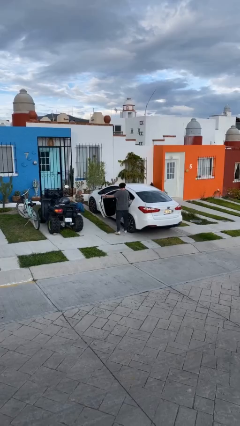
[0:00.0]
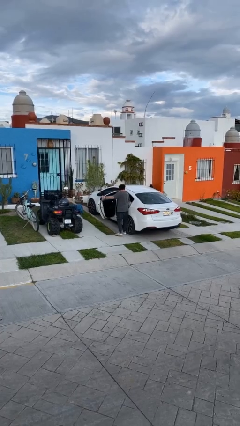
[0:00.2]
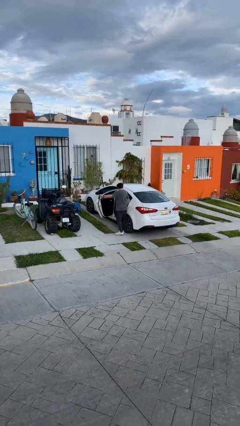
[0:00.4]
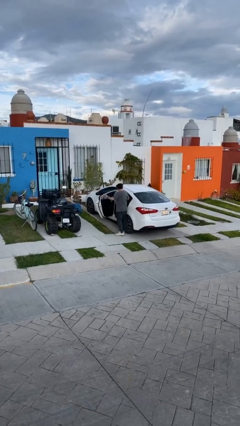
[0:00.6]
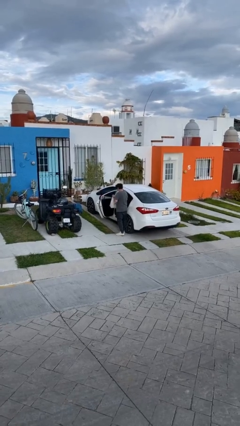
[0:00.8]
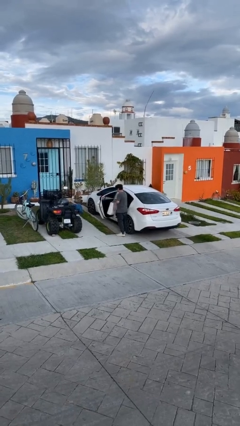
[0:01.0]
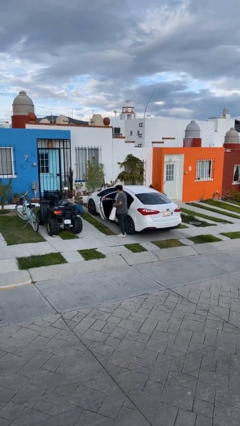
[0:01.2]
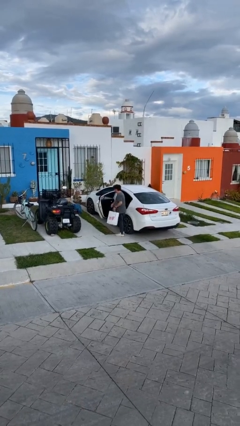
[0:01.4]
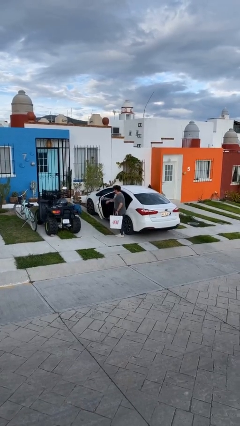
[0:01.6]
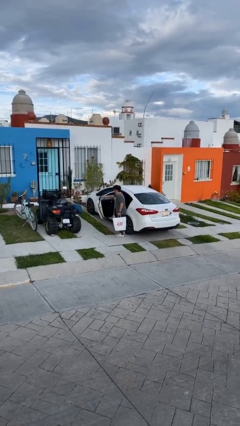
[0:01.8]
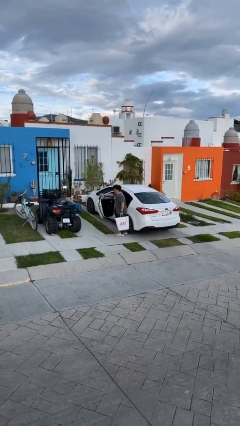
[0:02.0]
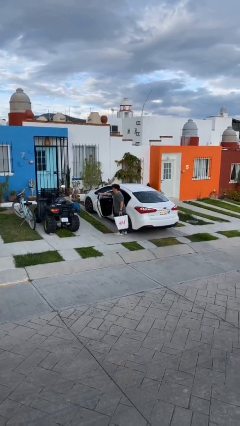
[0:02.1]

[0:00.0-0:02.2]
person unloads car

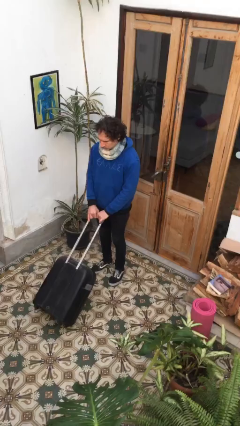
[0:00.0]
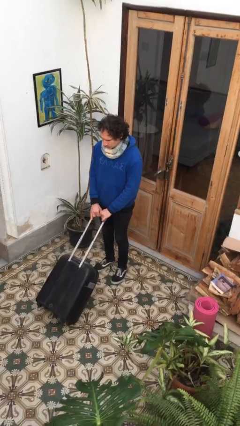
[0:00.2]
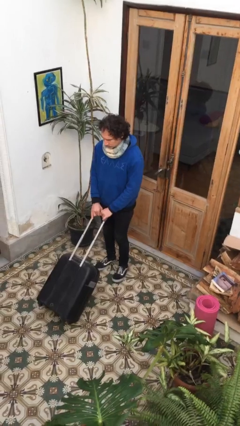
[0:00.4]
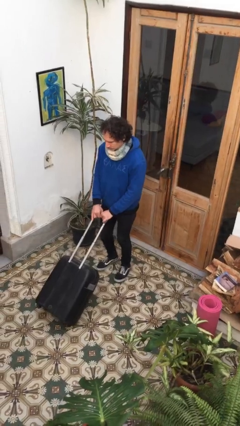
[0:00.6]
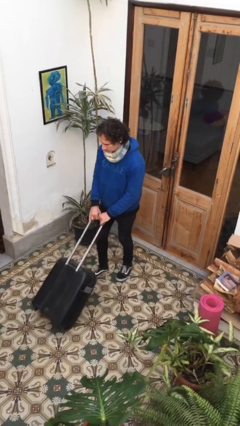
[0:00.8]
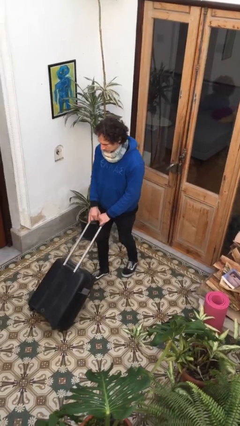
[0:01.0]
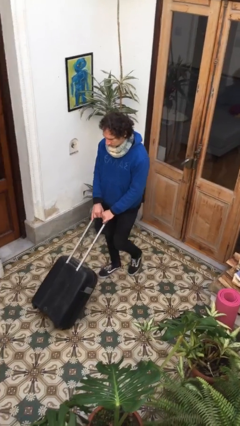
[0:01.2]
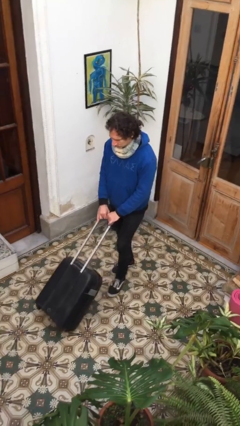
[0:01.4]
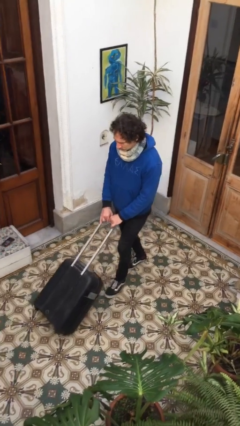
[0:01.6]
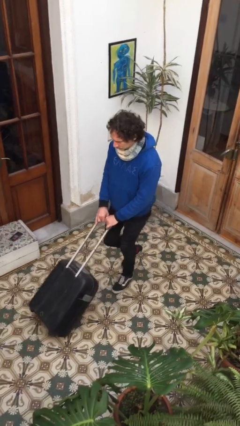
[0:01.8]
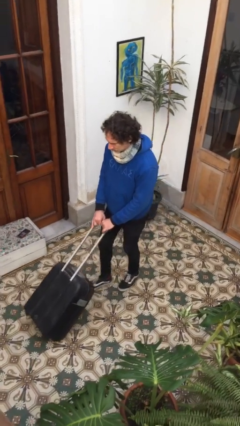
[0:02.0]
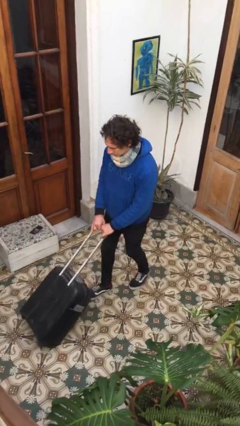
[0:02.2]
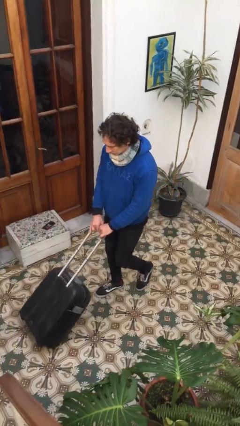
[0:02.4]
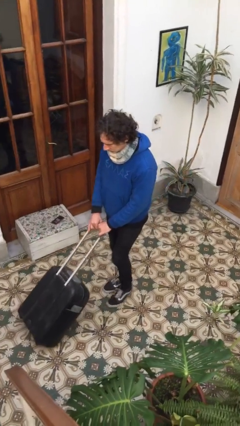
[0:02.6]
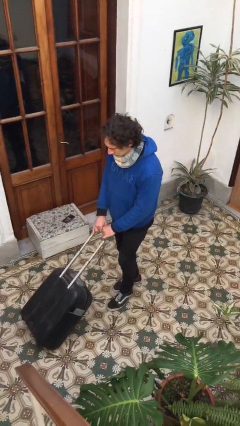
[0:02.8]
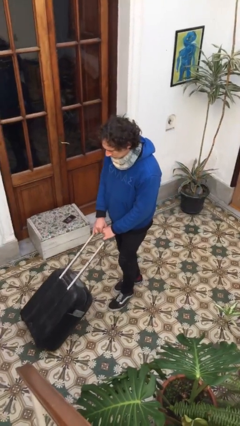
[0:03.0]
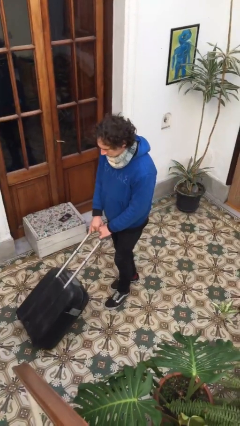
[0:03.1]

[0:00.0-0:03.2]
person pushes wheeled cart

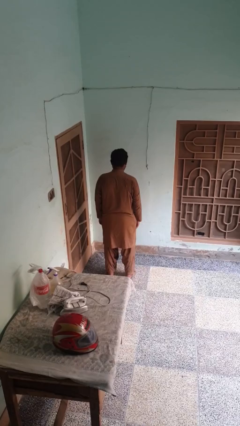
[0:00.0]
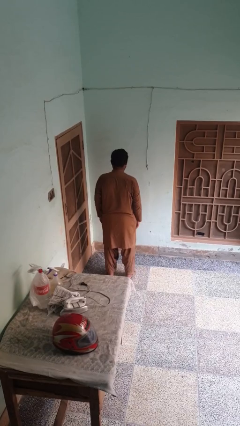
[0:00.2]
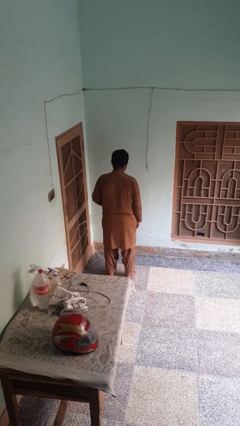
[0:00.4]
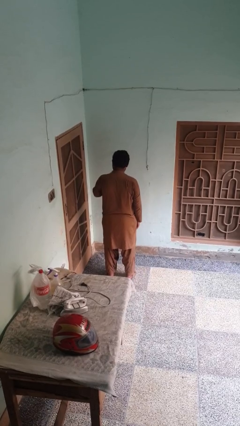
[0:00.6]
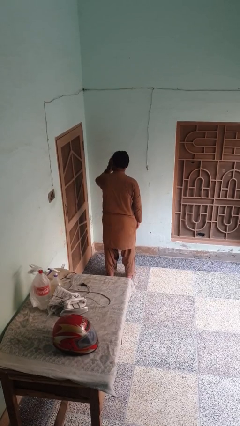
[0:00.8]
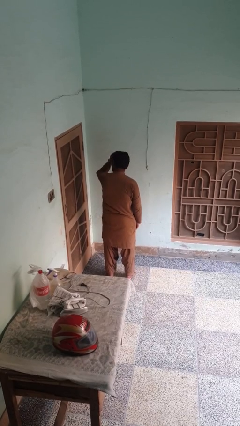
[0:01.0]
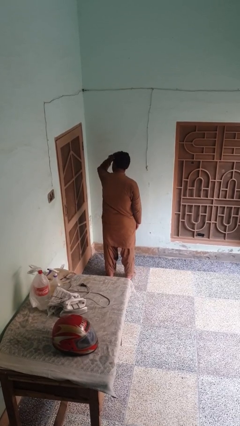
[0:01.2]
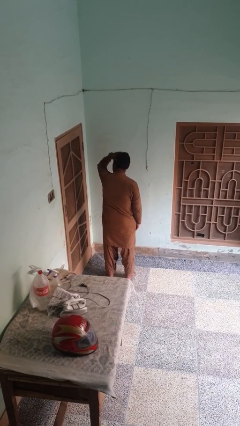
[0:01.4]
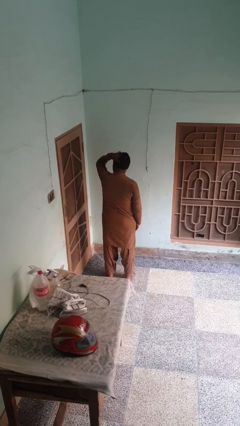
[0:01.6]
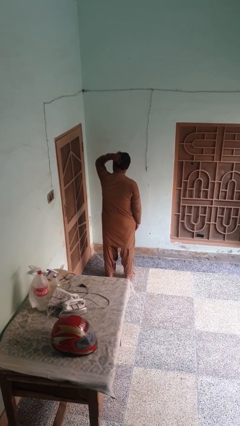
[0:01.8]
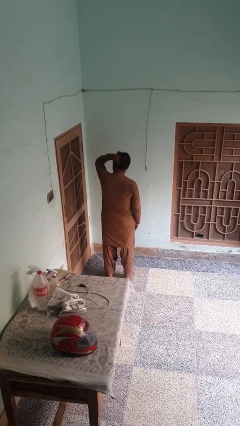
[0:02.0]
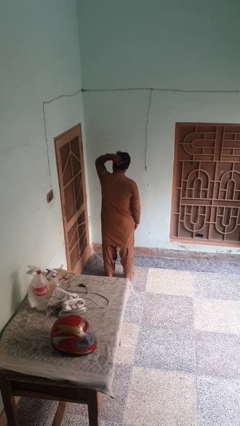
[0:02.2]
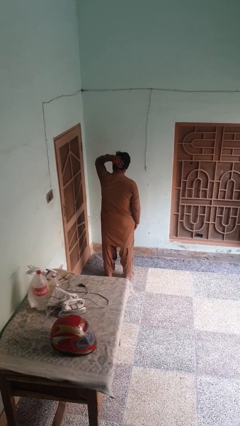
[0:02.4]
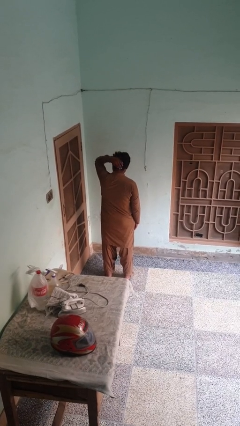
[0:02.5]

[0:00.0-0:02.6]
person strokes hair

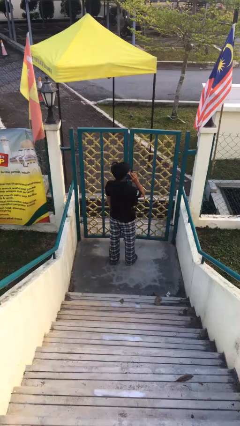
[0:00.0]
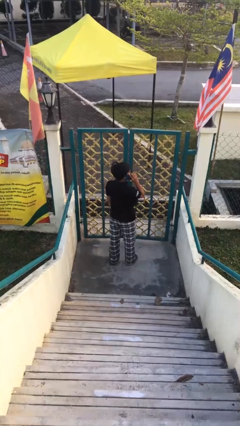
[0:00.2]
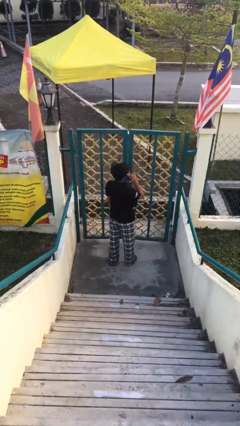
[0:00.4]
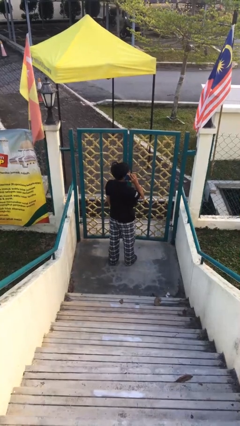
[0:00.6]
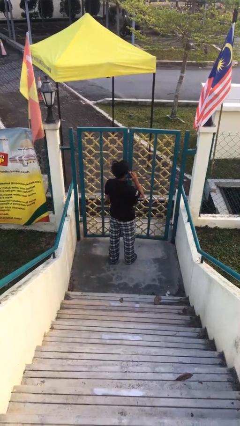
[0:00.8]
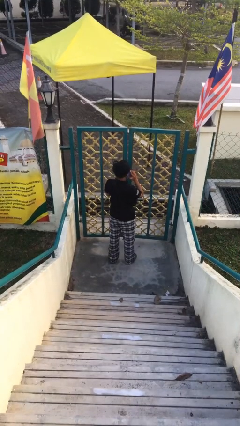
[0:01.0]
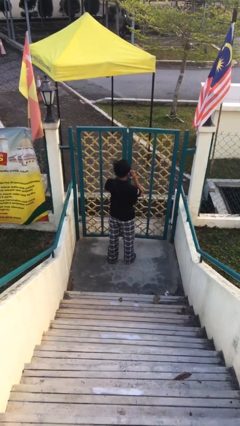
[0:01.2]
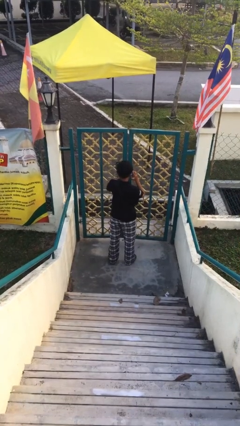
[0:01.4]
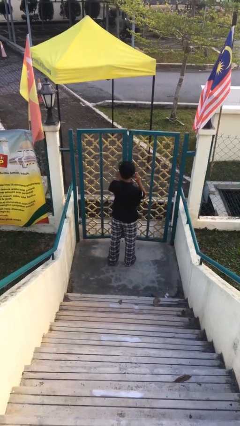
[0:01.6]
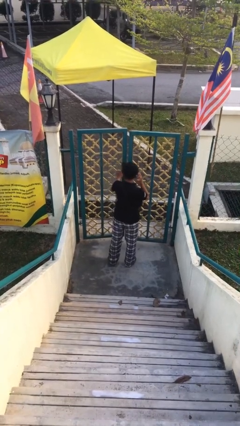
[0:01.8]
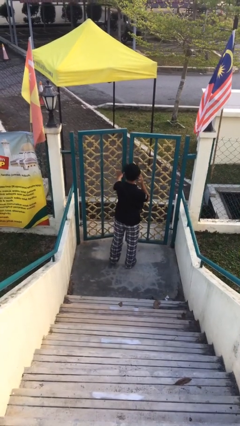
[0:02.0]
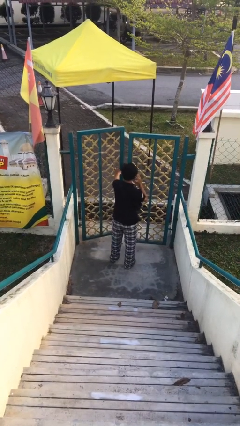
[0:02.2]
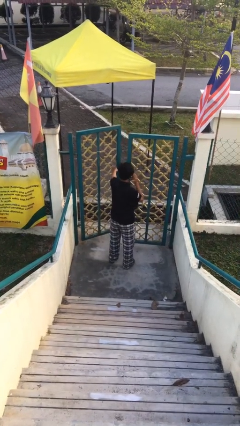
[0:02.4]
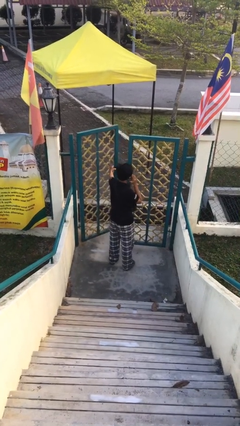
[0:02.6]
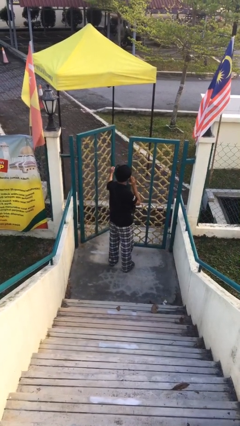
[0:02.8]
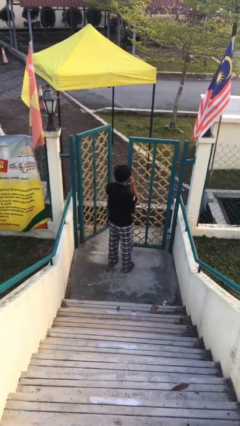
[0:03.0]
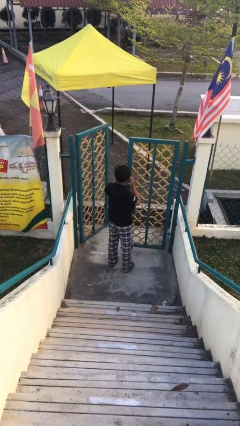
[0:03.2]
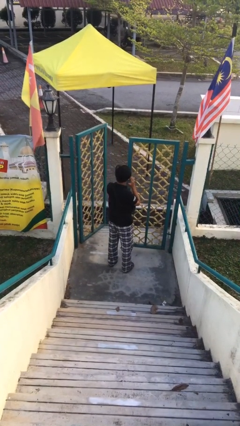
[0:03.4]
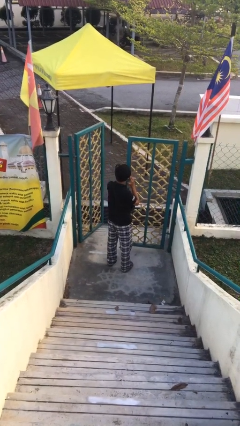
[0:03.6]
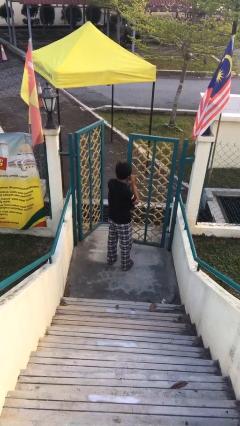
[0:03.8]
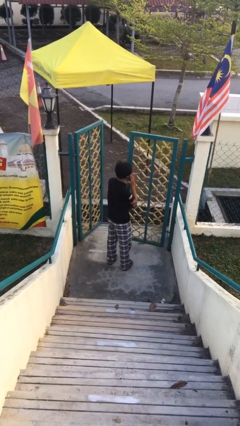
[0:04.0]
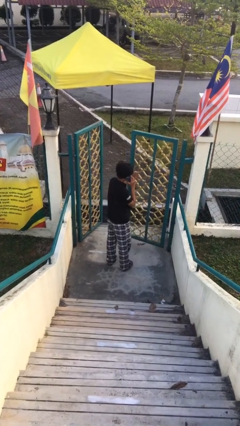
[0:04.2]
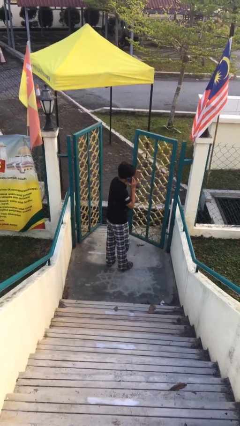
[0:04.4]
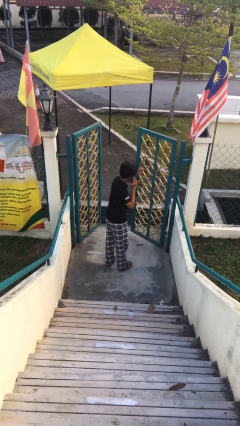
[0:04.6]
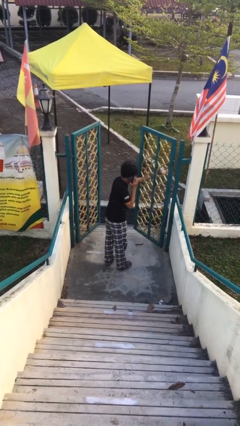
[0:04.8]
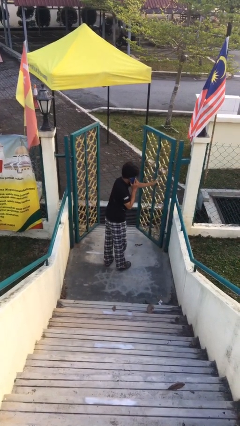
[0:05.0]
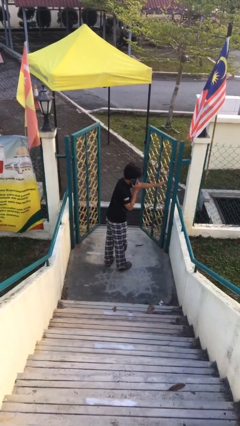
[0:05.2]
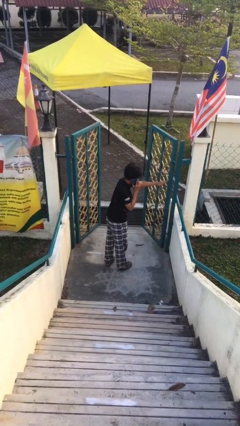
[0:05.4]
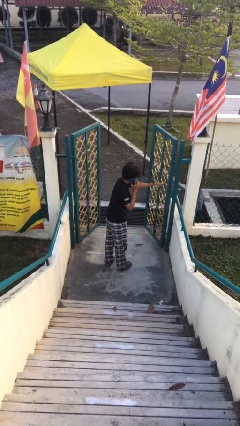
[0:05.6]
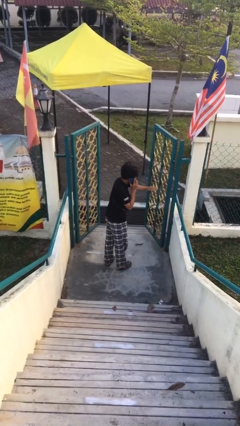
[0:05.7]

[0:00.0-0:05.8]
person opens facility door

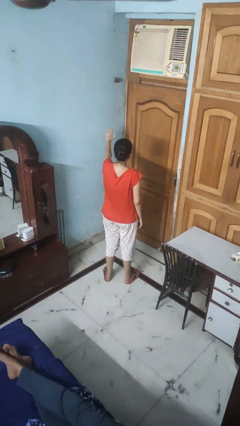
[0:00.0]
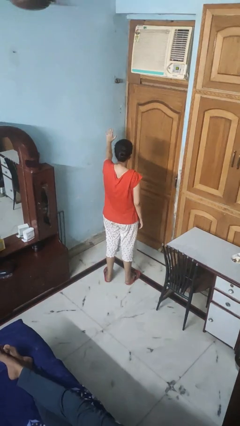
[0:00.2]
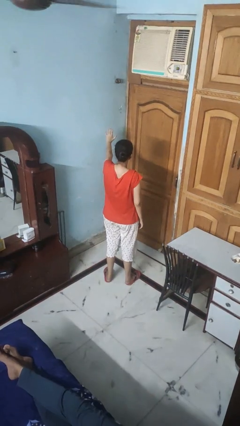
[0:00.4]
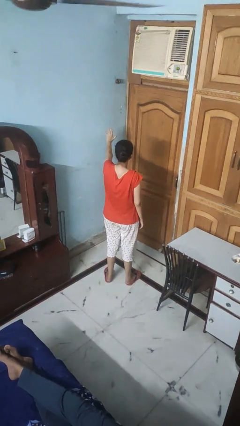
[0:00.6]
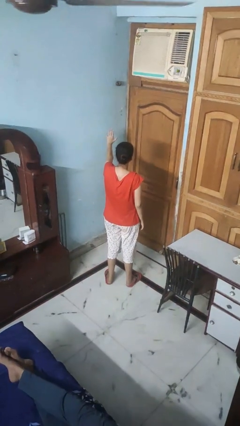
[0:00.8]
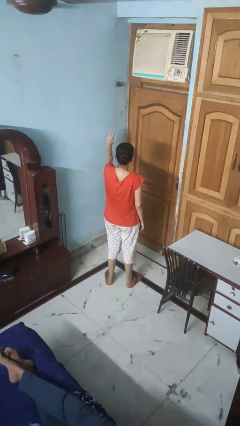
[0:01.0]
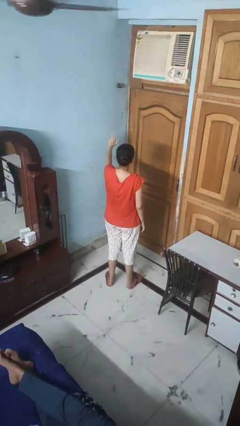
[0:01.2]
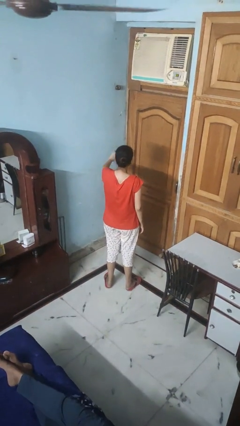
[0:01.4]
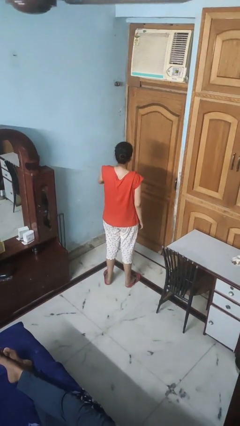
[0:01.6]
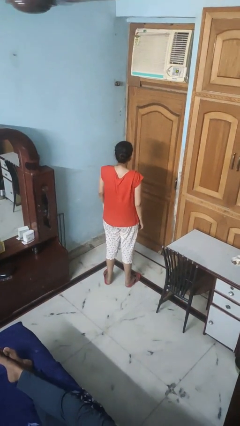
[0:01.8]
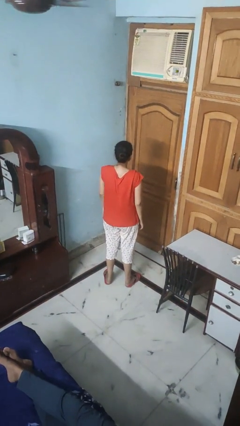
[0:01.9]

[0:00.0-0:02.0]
person gestures number five

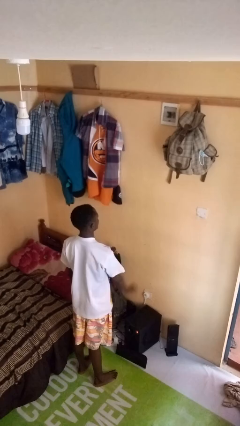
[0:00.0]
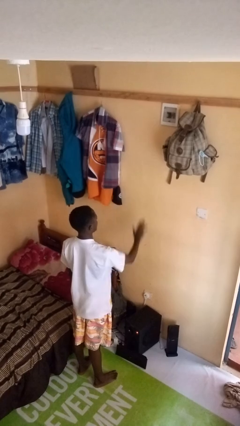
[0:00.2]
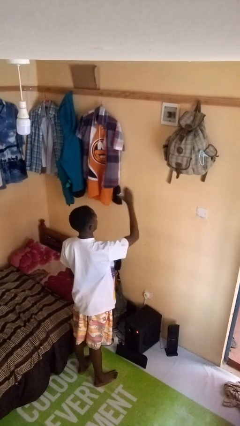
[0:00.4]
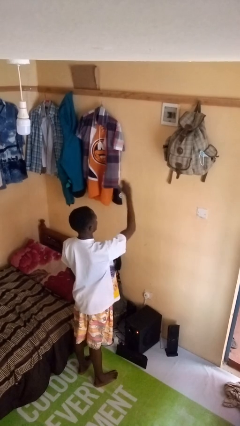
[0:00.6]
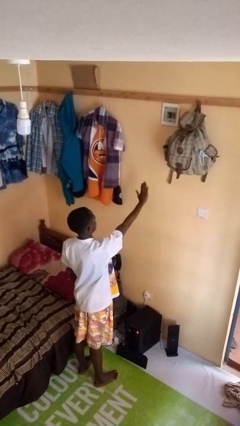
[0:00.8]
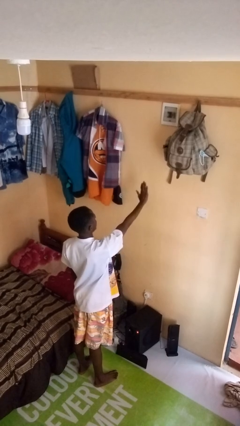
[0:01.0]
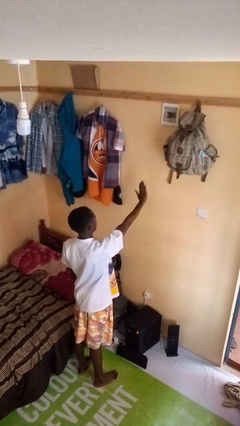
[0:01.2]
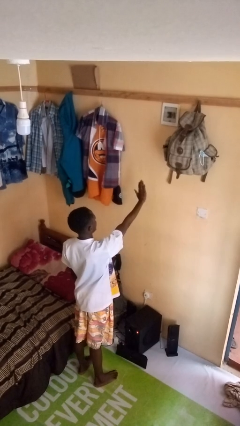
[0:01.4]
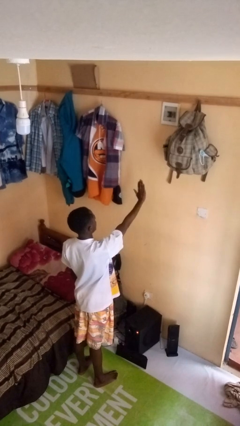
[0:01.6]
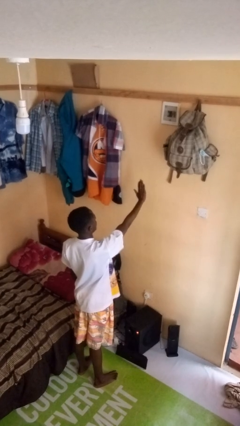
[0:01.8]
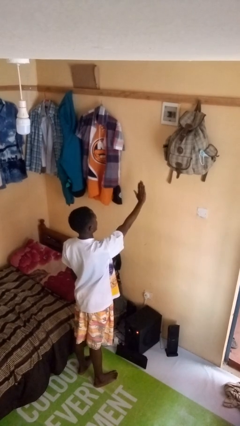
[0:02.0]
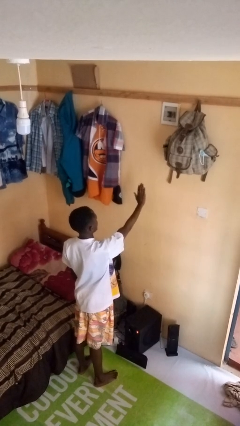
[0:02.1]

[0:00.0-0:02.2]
person gestures stop
